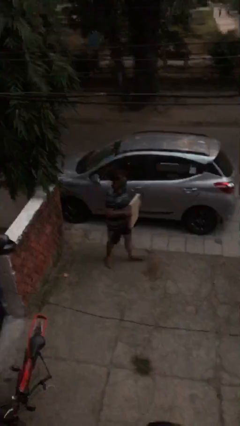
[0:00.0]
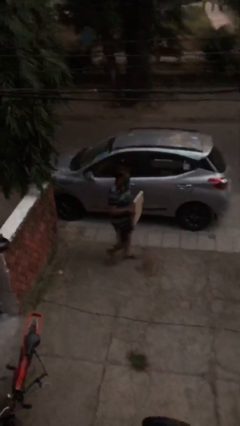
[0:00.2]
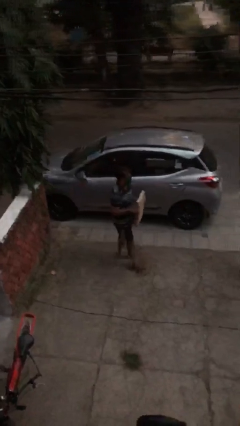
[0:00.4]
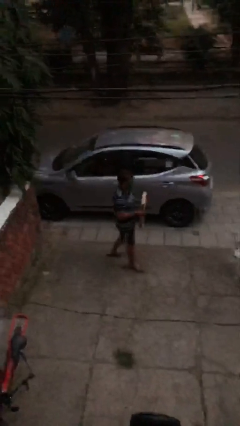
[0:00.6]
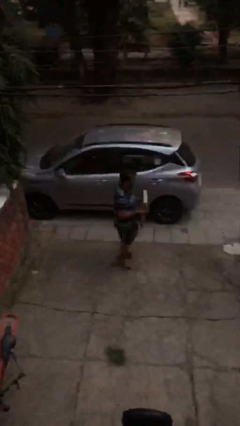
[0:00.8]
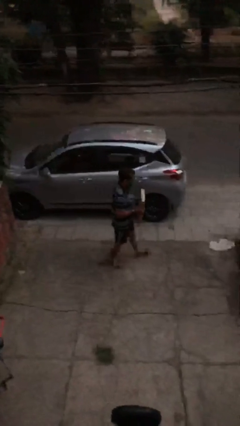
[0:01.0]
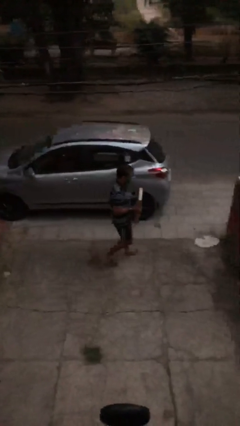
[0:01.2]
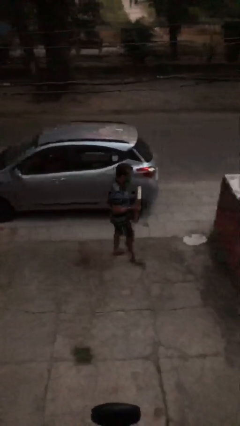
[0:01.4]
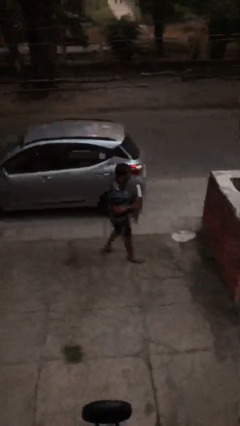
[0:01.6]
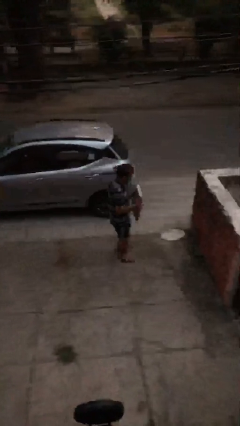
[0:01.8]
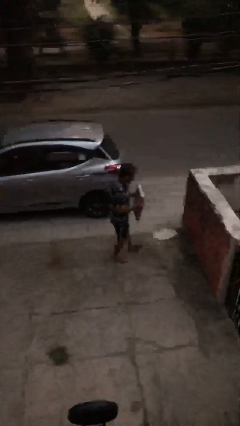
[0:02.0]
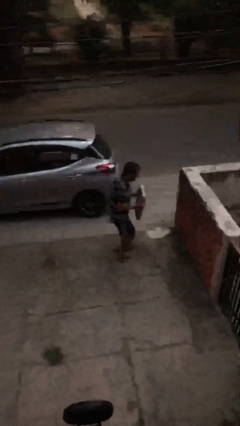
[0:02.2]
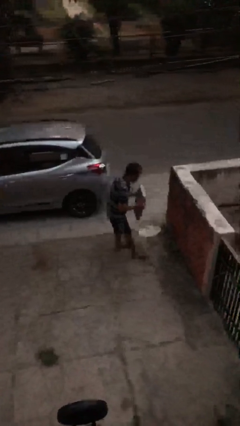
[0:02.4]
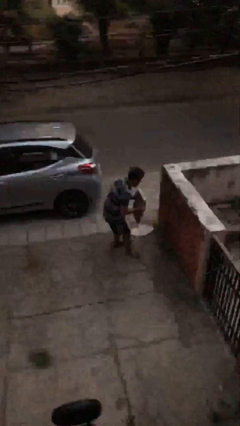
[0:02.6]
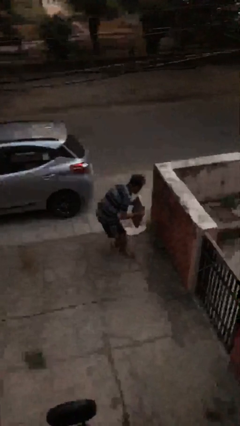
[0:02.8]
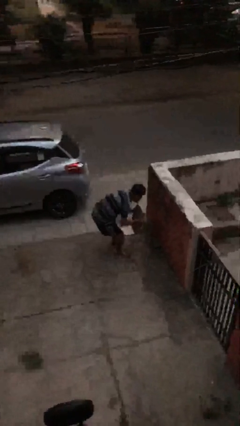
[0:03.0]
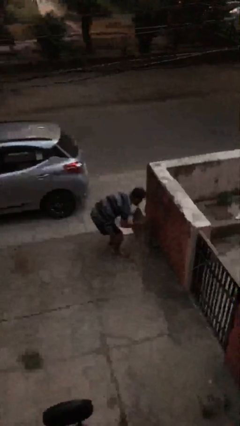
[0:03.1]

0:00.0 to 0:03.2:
person carries heavy object

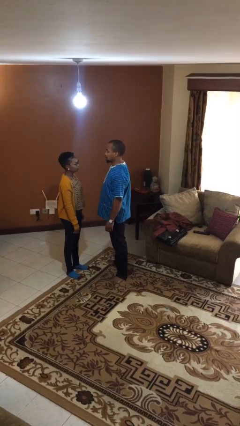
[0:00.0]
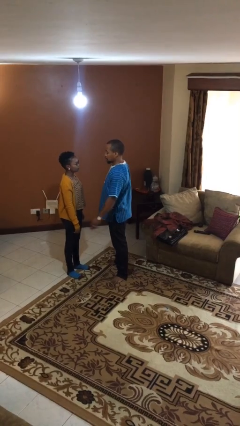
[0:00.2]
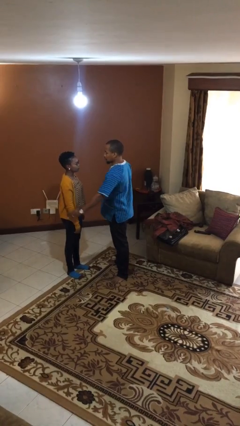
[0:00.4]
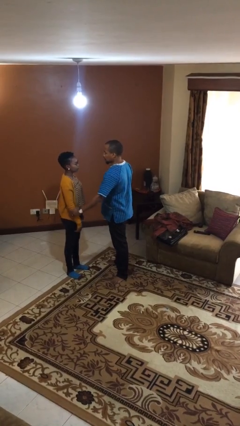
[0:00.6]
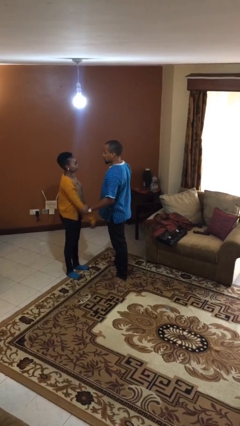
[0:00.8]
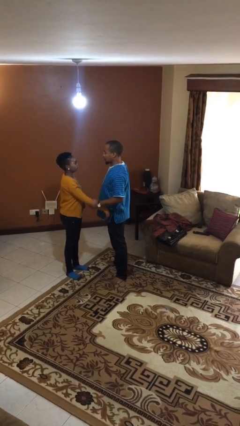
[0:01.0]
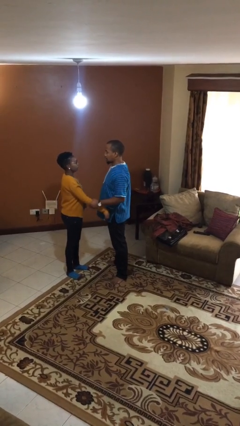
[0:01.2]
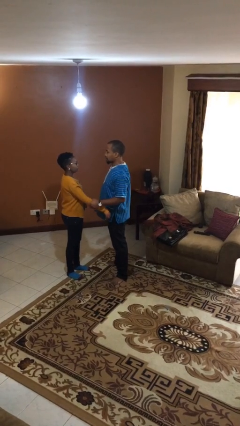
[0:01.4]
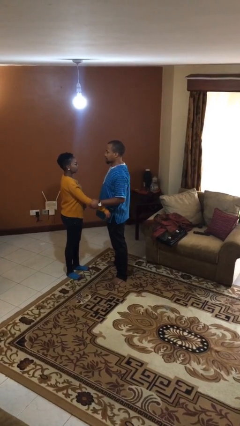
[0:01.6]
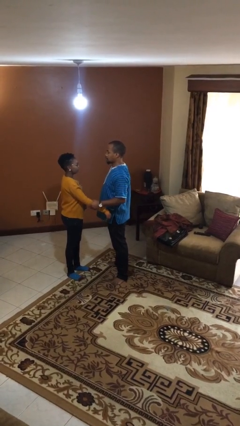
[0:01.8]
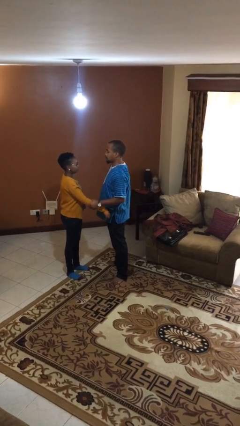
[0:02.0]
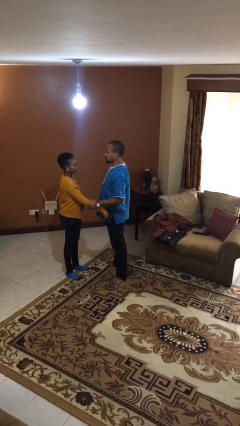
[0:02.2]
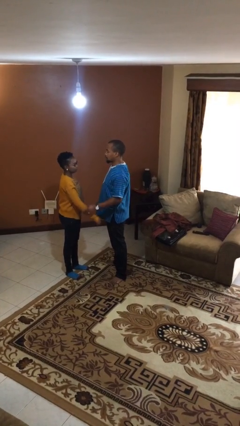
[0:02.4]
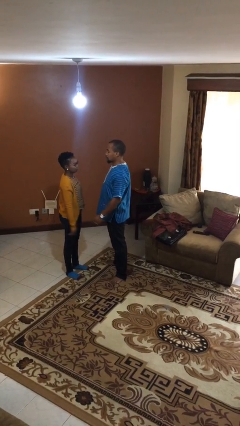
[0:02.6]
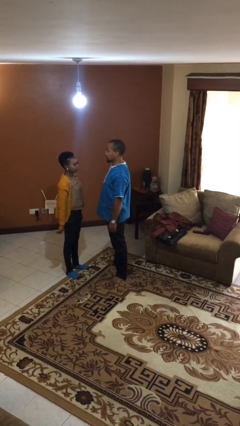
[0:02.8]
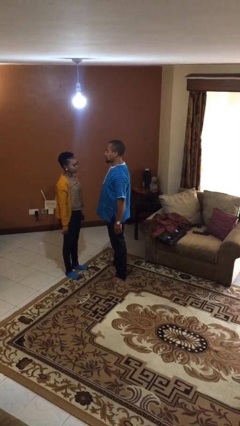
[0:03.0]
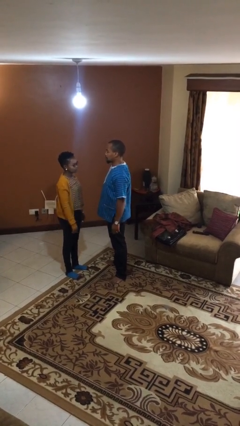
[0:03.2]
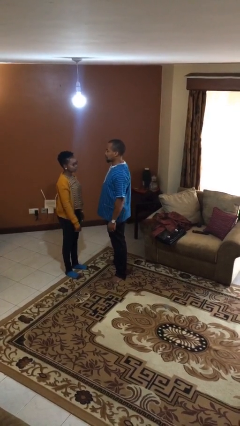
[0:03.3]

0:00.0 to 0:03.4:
person grabs person by forearm

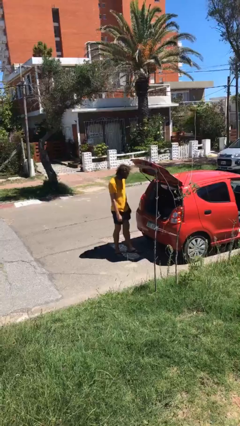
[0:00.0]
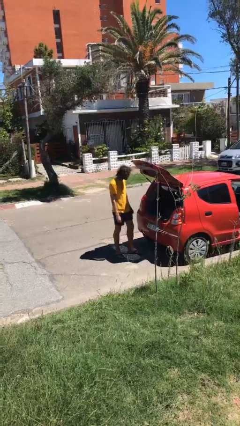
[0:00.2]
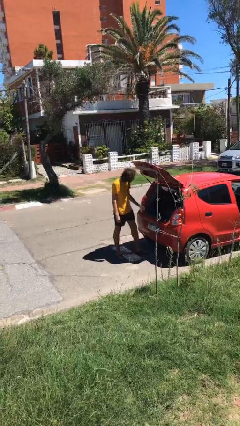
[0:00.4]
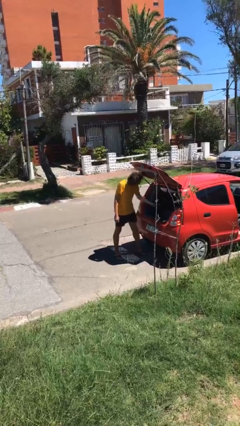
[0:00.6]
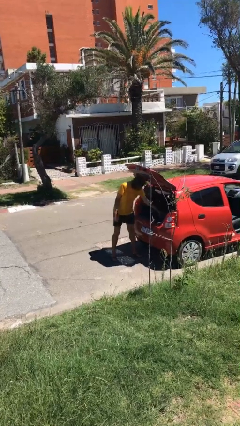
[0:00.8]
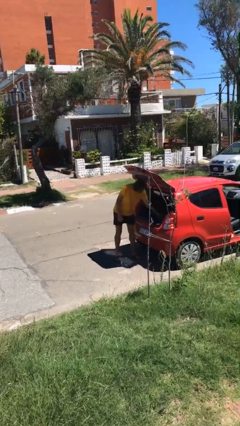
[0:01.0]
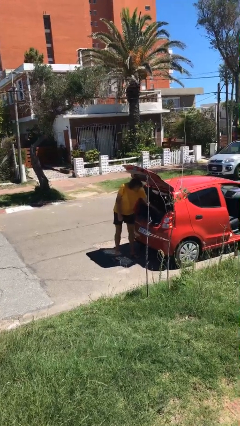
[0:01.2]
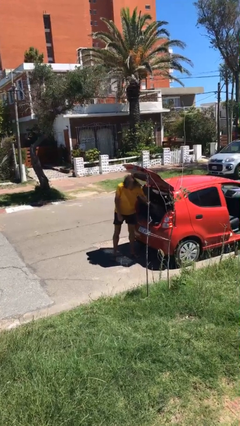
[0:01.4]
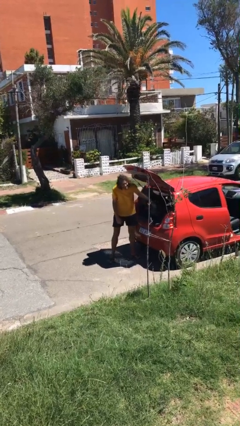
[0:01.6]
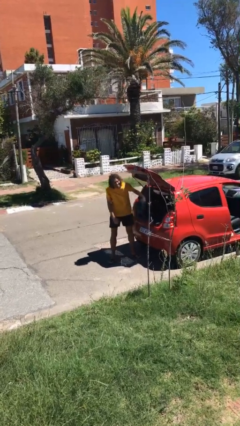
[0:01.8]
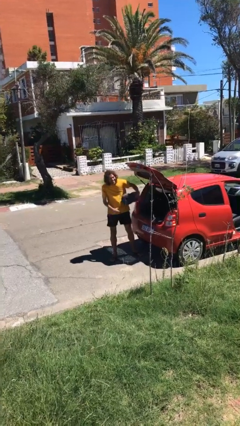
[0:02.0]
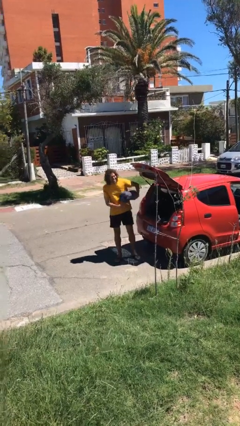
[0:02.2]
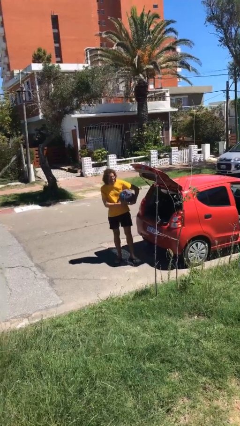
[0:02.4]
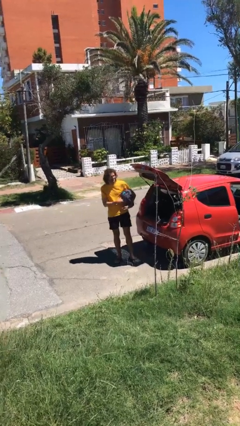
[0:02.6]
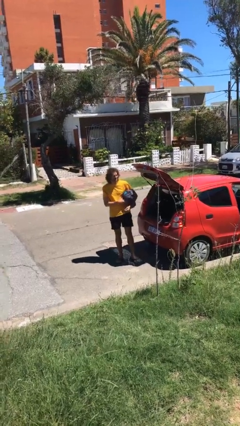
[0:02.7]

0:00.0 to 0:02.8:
person unloads car

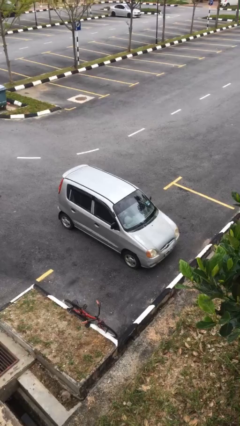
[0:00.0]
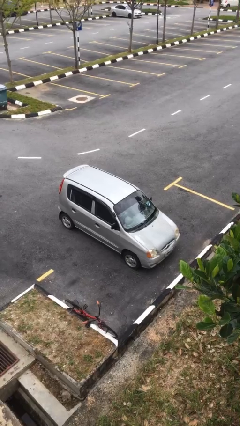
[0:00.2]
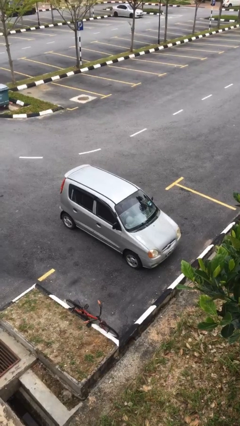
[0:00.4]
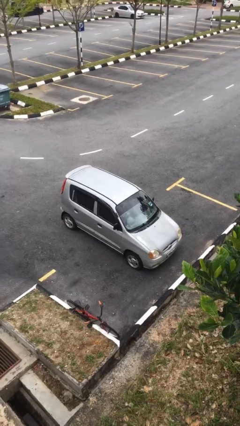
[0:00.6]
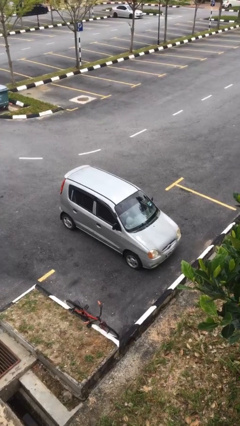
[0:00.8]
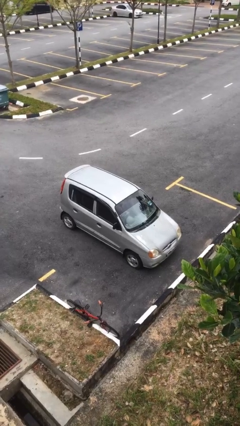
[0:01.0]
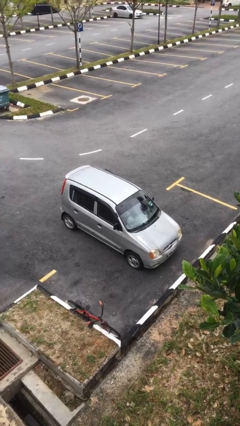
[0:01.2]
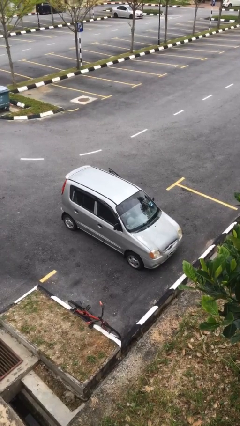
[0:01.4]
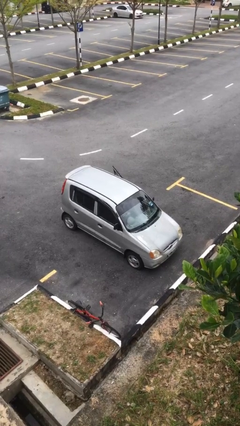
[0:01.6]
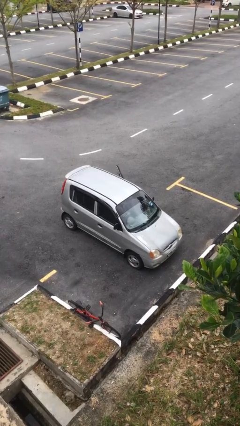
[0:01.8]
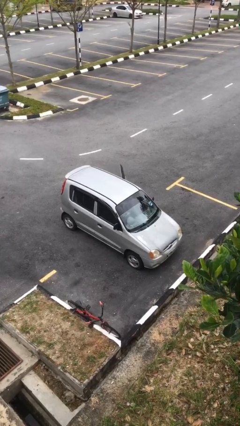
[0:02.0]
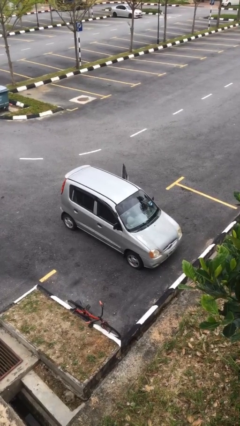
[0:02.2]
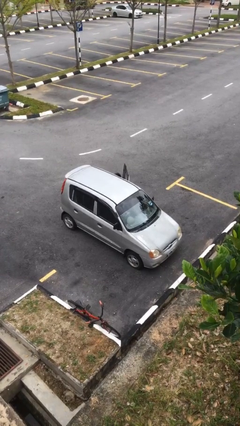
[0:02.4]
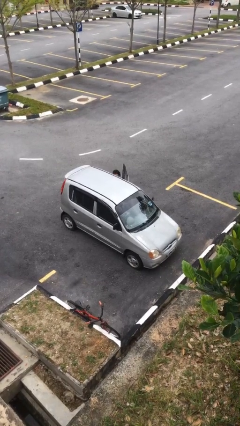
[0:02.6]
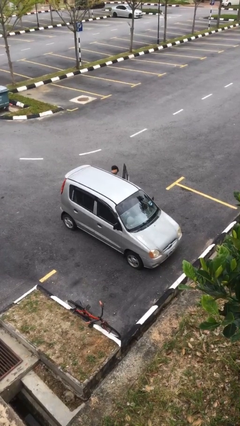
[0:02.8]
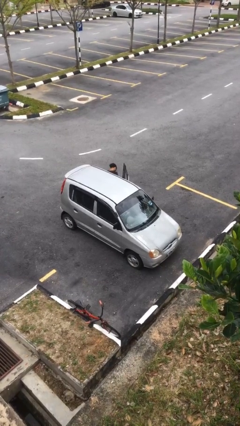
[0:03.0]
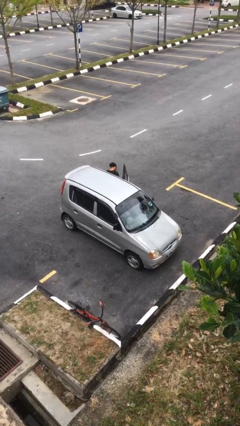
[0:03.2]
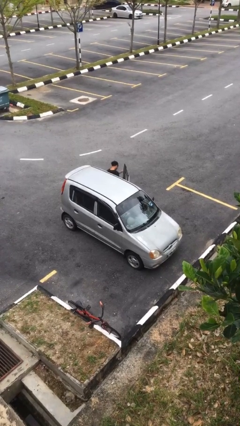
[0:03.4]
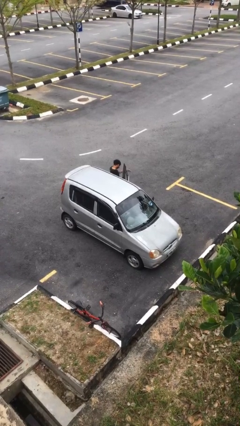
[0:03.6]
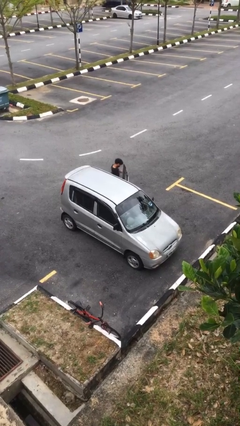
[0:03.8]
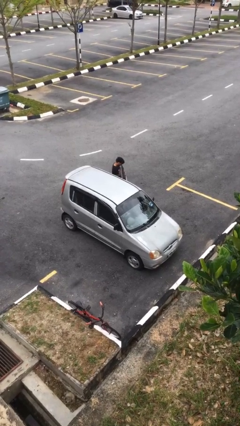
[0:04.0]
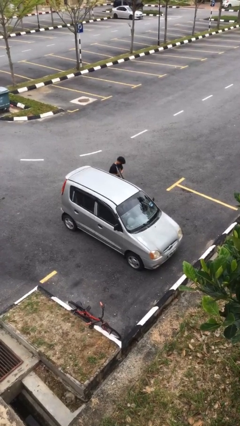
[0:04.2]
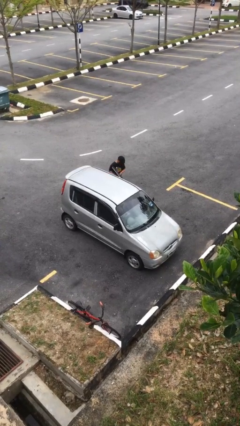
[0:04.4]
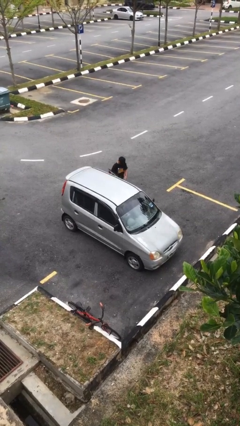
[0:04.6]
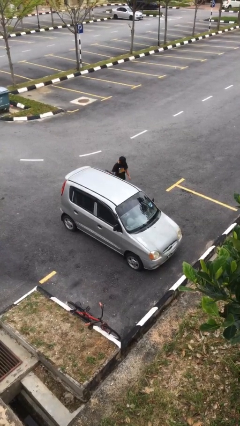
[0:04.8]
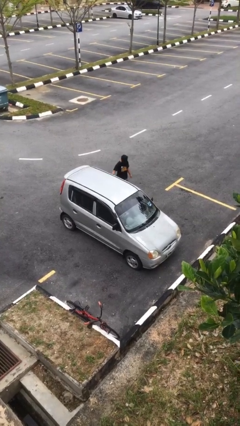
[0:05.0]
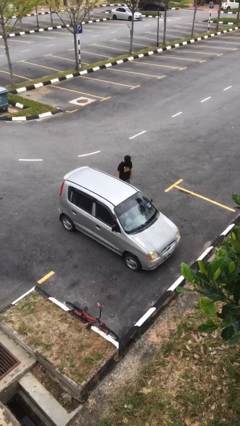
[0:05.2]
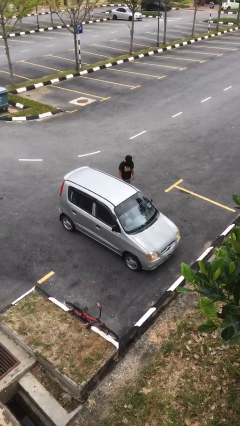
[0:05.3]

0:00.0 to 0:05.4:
car drops off person

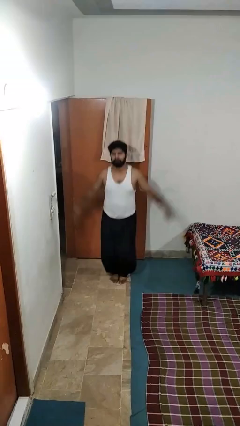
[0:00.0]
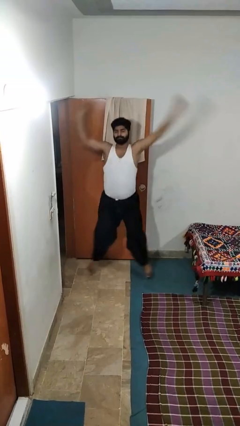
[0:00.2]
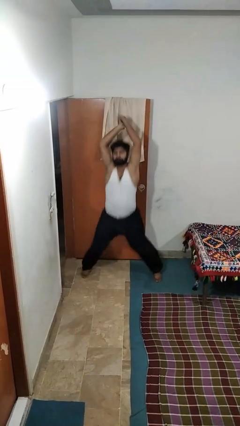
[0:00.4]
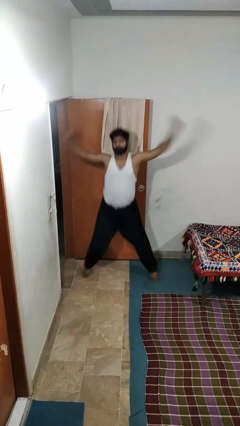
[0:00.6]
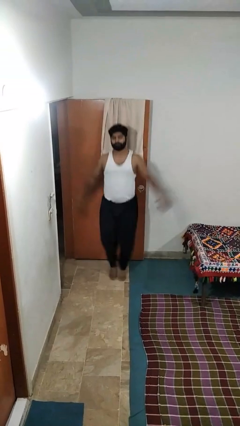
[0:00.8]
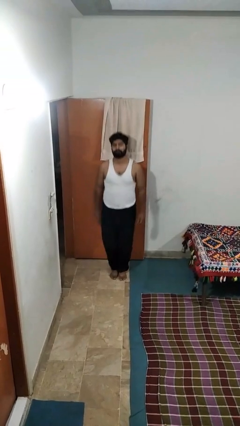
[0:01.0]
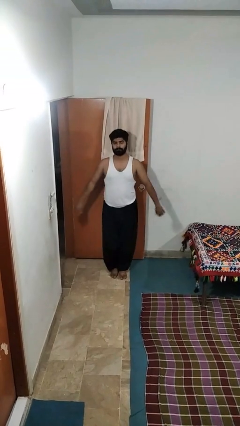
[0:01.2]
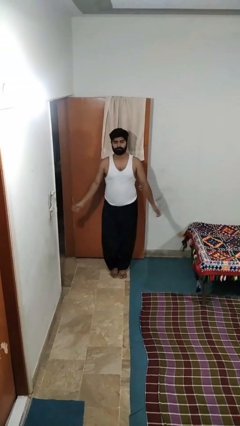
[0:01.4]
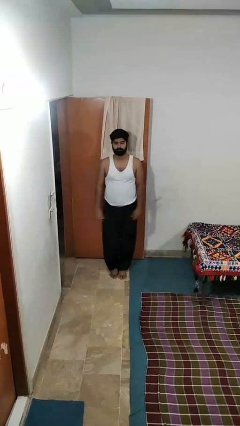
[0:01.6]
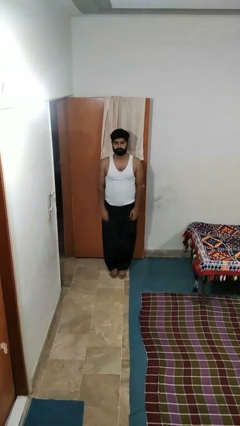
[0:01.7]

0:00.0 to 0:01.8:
person exercises with jumping jacks

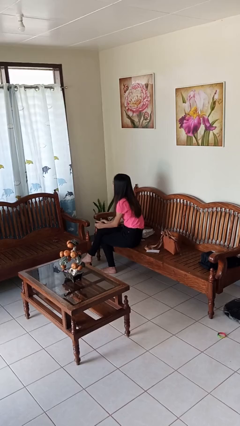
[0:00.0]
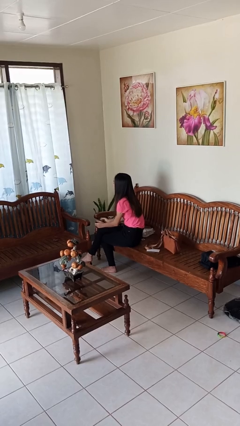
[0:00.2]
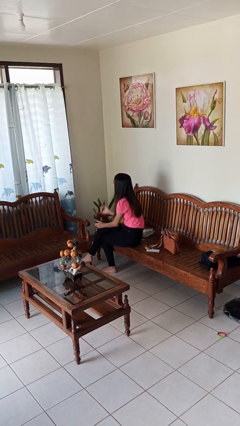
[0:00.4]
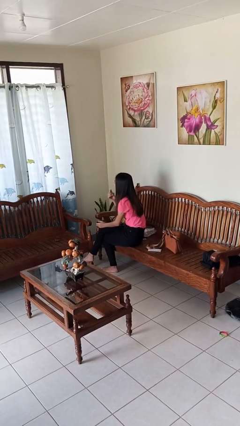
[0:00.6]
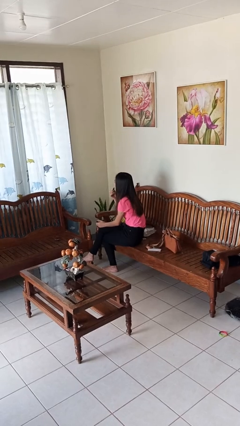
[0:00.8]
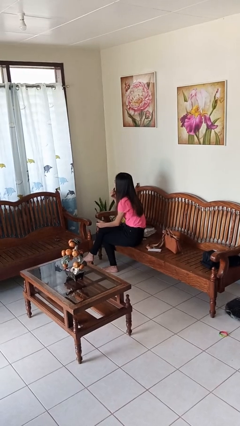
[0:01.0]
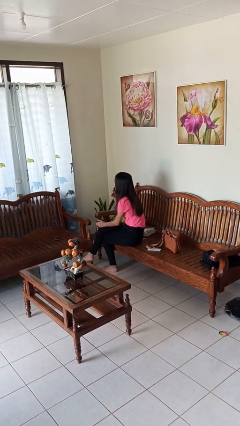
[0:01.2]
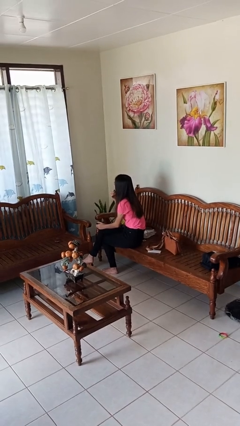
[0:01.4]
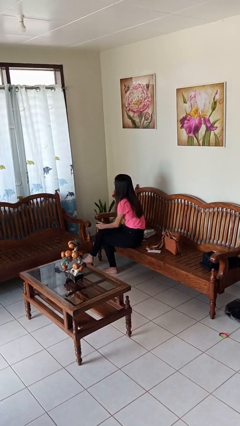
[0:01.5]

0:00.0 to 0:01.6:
person applies lip makeup
